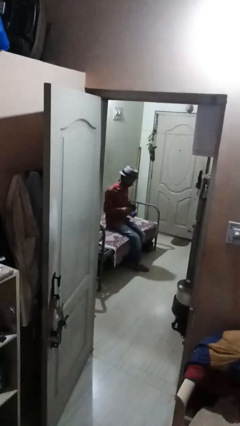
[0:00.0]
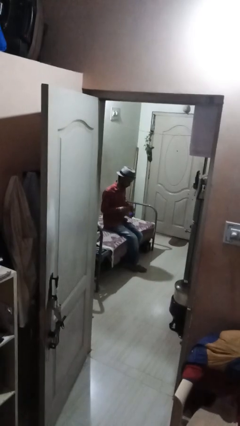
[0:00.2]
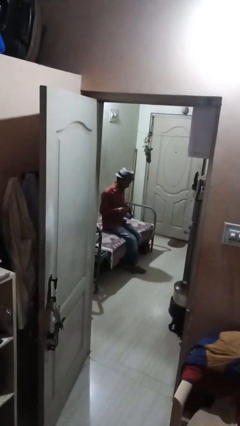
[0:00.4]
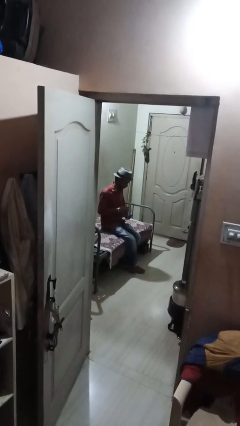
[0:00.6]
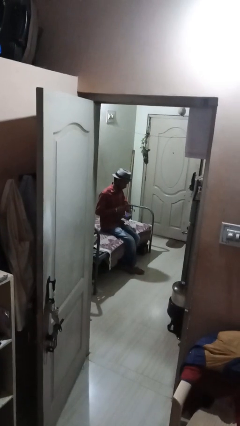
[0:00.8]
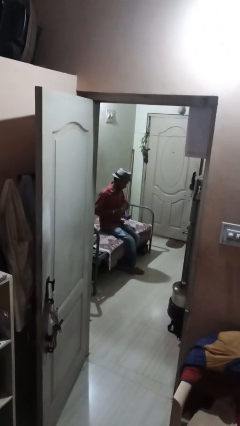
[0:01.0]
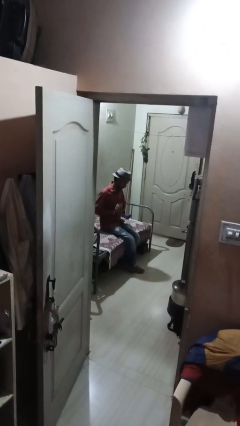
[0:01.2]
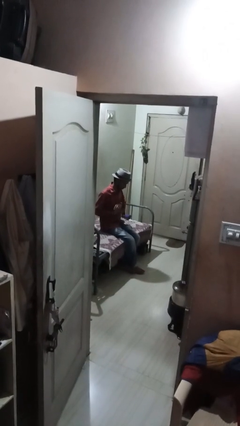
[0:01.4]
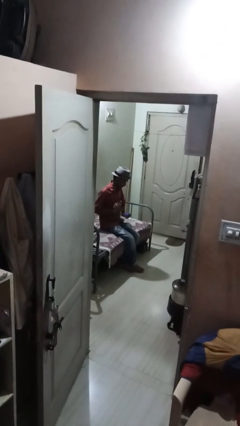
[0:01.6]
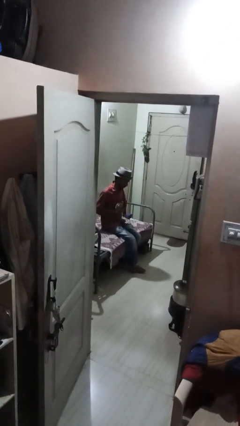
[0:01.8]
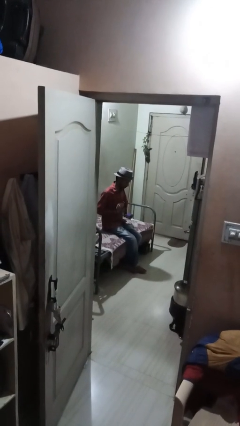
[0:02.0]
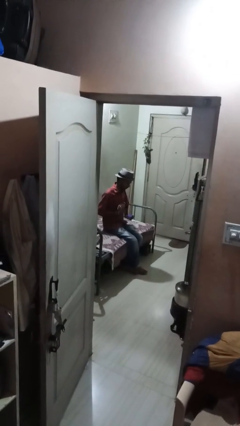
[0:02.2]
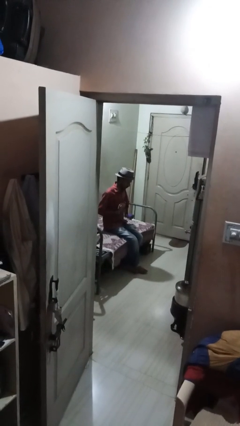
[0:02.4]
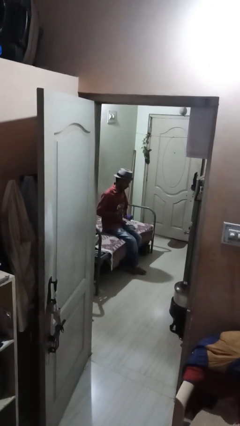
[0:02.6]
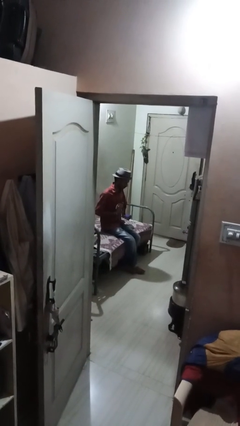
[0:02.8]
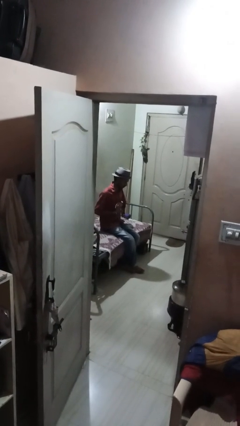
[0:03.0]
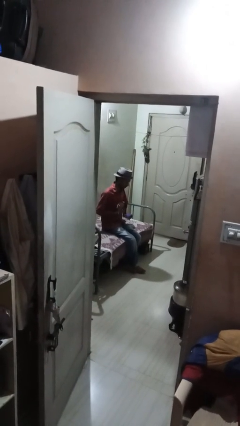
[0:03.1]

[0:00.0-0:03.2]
person puts on wristwatch

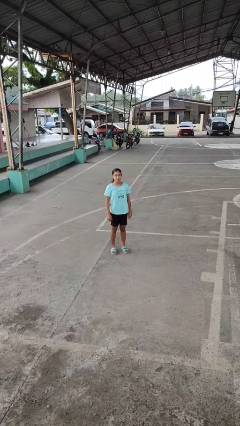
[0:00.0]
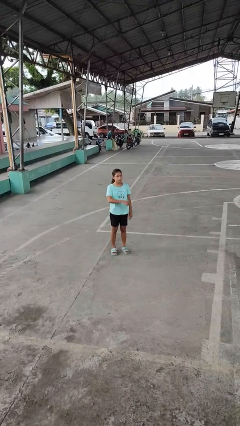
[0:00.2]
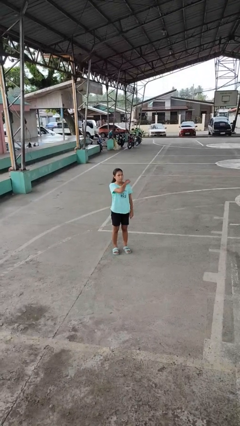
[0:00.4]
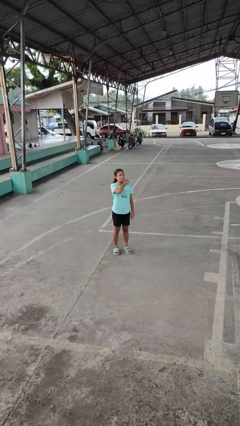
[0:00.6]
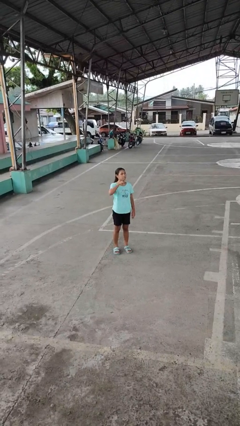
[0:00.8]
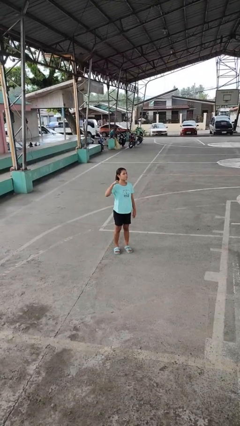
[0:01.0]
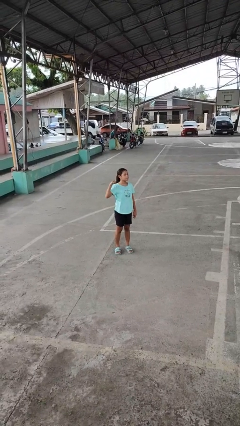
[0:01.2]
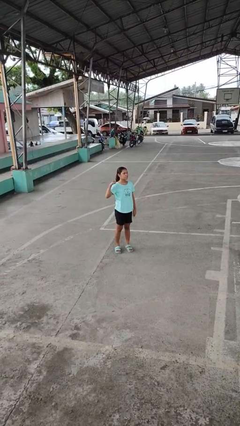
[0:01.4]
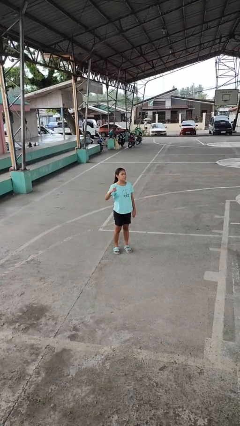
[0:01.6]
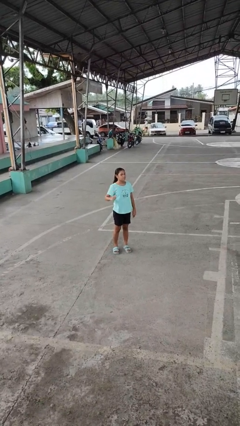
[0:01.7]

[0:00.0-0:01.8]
person gestures cut

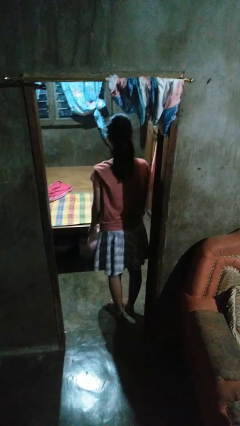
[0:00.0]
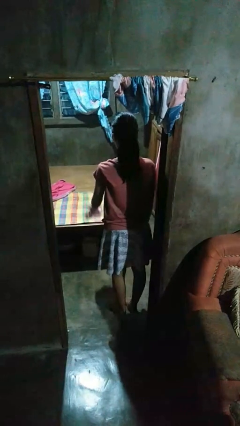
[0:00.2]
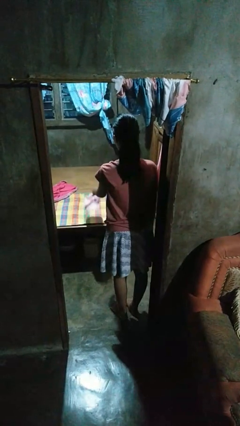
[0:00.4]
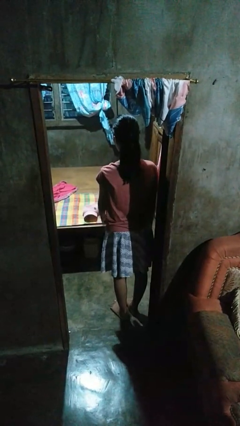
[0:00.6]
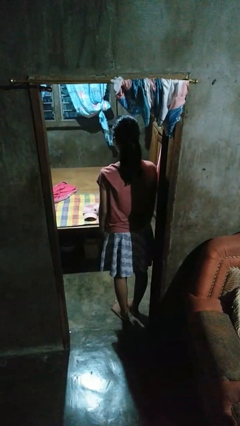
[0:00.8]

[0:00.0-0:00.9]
person throws object on bed

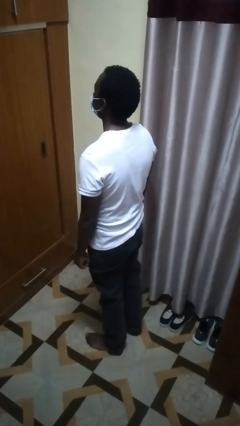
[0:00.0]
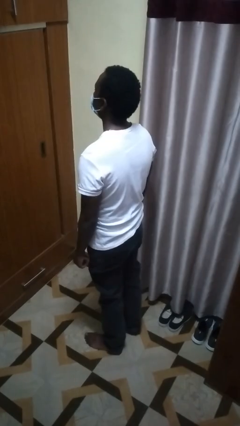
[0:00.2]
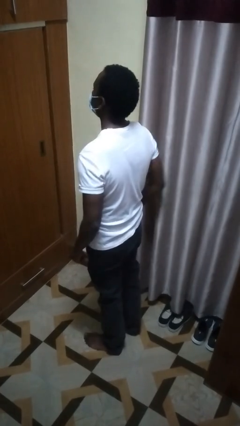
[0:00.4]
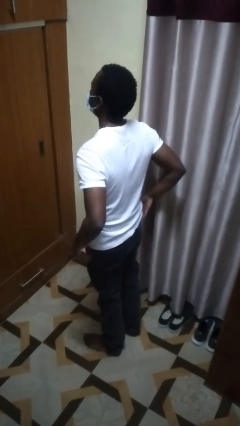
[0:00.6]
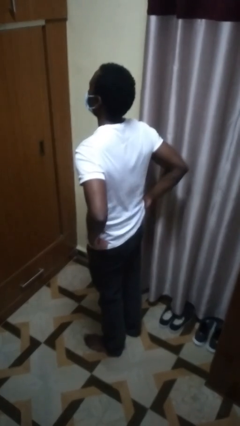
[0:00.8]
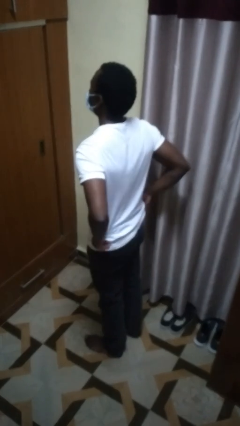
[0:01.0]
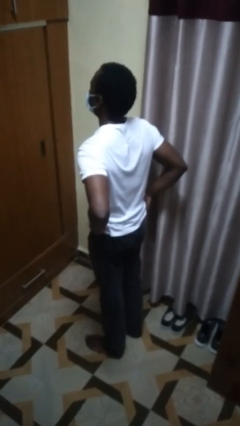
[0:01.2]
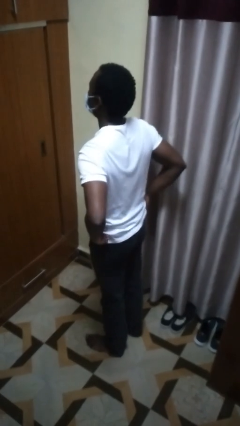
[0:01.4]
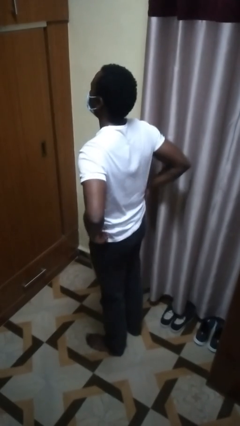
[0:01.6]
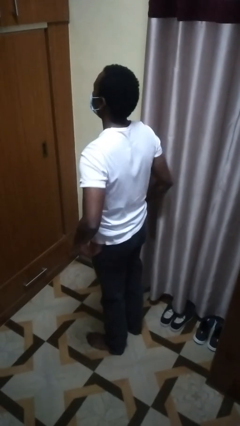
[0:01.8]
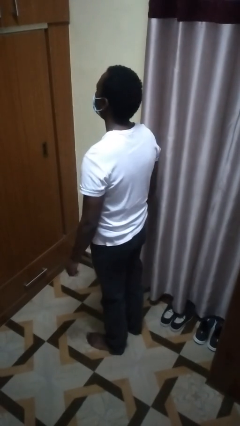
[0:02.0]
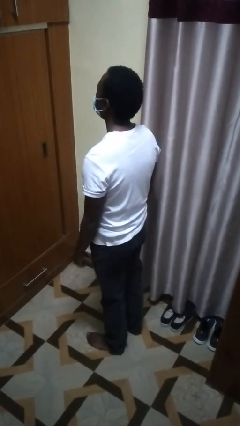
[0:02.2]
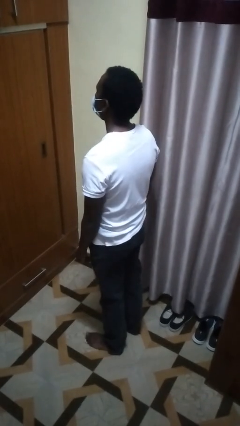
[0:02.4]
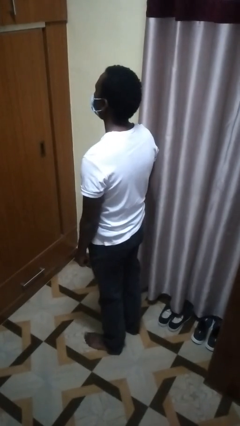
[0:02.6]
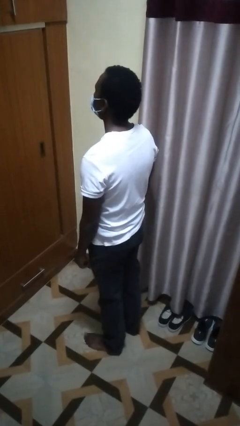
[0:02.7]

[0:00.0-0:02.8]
person hikes up pants

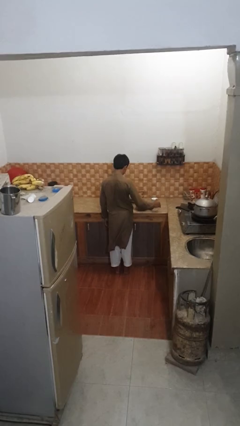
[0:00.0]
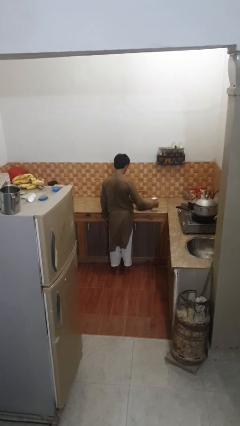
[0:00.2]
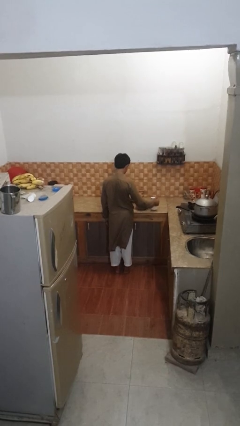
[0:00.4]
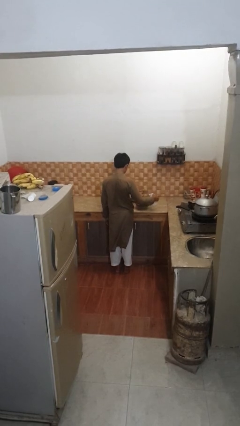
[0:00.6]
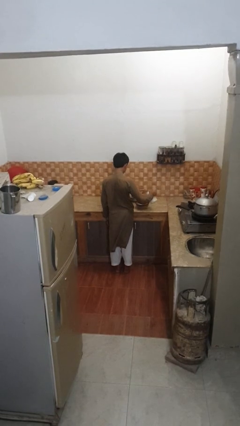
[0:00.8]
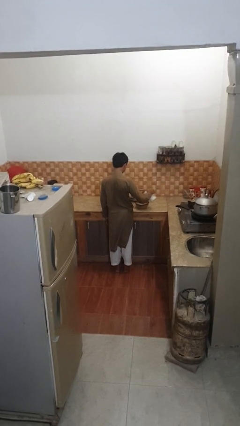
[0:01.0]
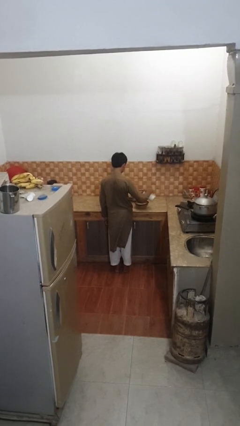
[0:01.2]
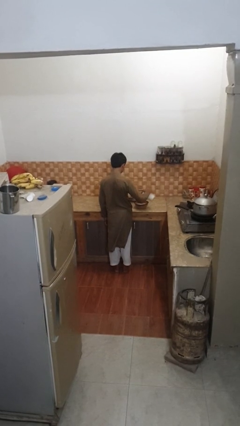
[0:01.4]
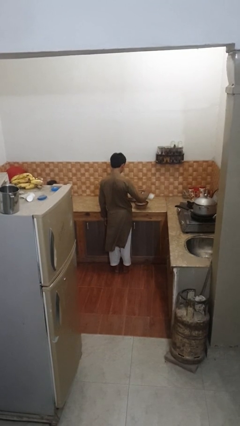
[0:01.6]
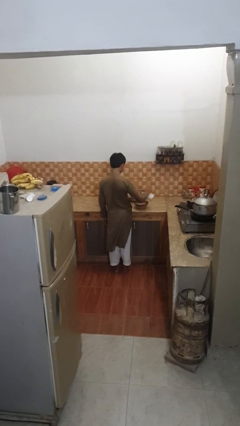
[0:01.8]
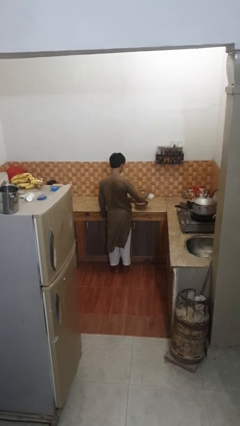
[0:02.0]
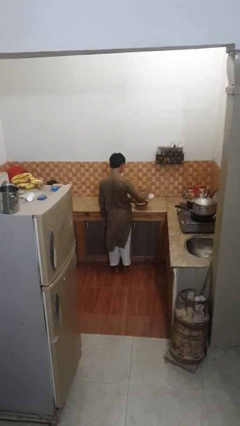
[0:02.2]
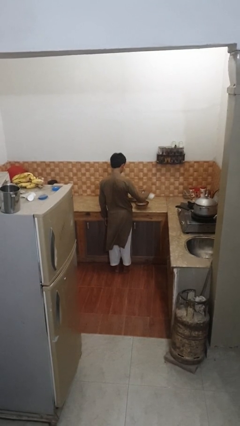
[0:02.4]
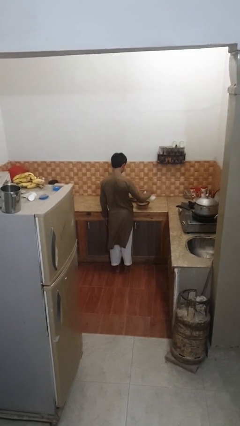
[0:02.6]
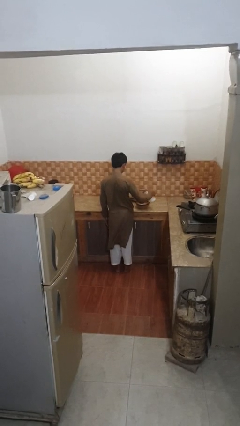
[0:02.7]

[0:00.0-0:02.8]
person pours into bowl

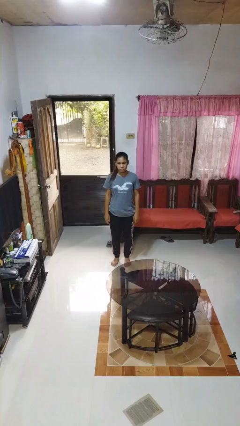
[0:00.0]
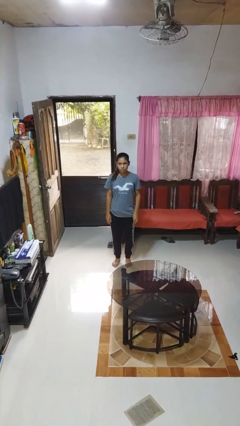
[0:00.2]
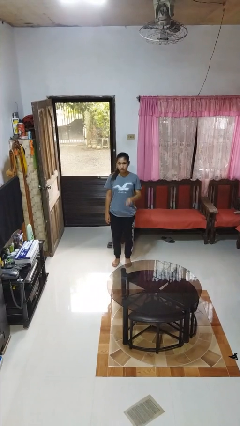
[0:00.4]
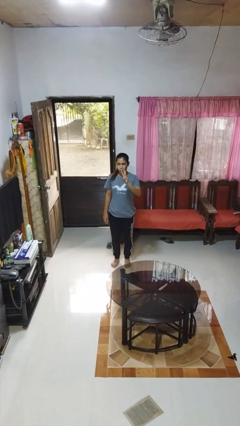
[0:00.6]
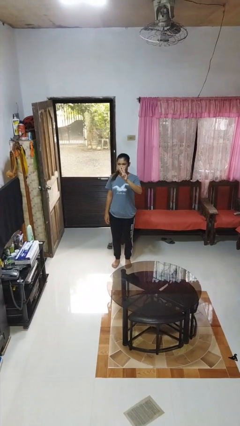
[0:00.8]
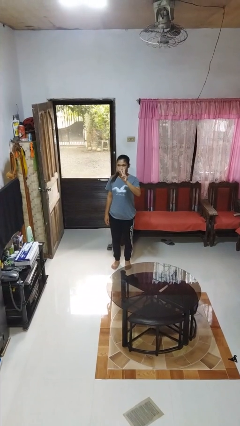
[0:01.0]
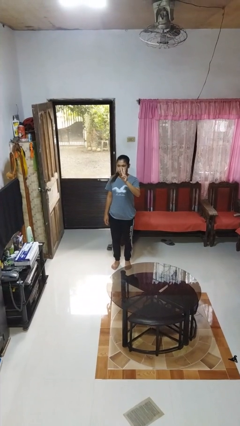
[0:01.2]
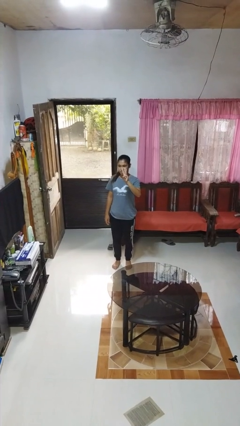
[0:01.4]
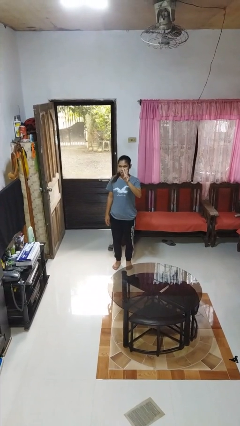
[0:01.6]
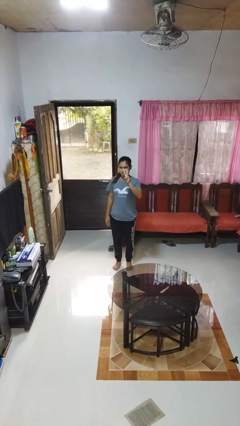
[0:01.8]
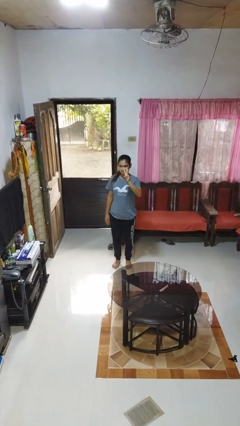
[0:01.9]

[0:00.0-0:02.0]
person gestures number three

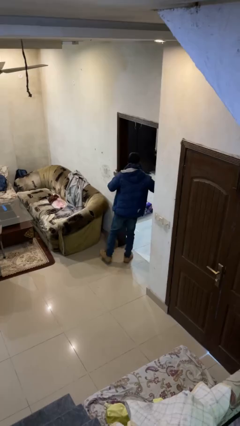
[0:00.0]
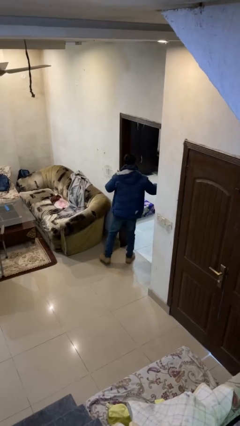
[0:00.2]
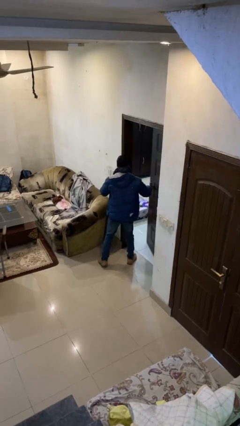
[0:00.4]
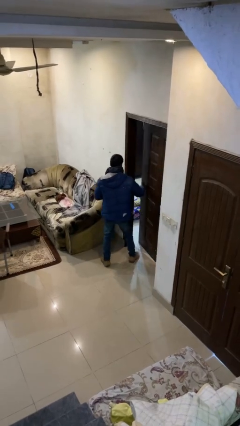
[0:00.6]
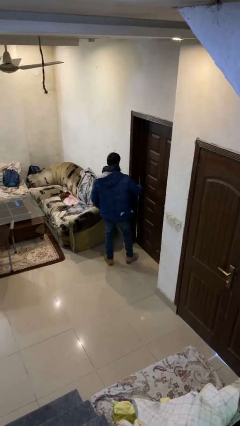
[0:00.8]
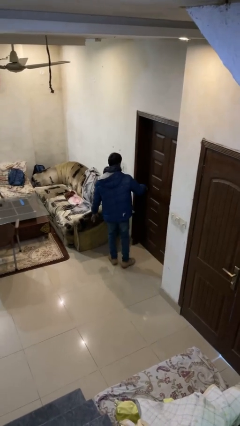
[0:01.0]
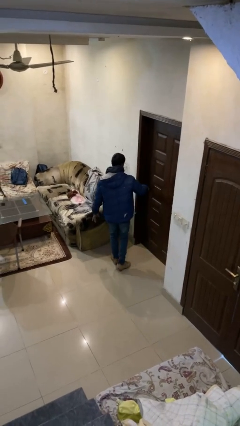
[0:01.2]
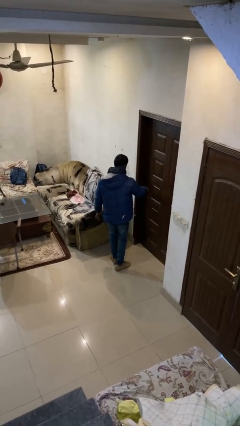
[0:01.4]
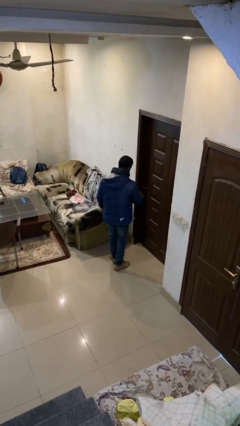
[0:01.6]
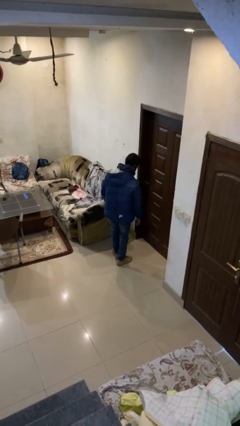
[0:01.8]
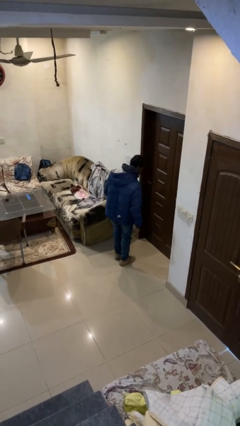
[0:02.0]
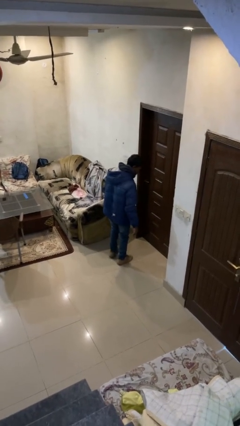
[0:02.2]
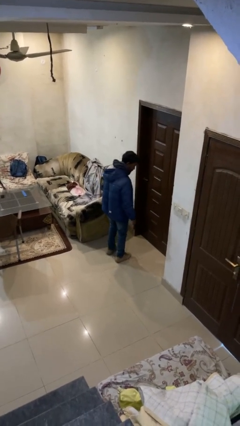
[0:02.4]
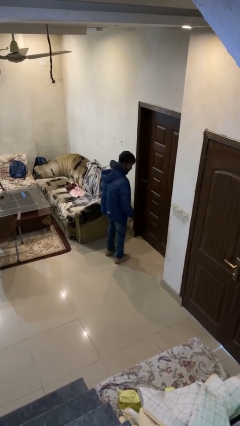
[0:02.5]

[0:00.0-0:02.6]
person closes facility door

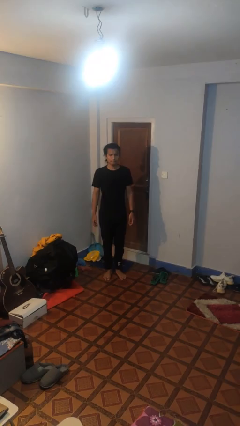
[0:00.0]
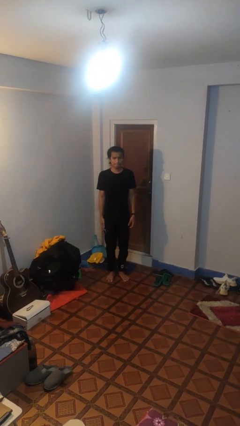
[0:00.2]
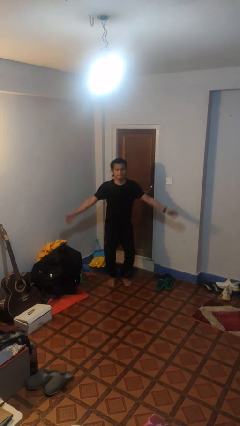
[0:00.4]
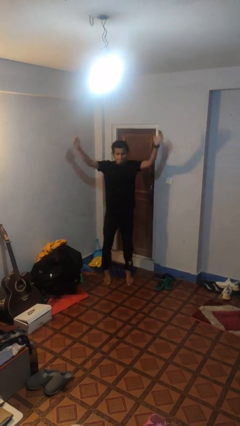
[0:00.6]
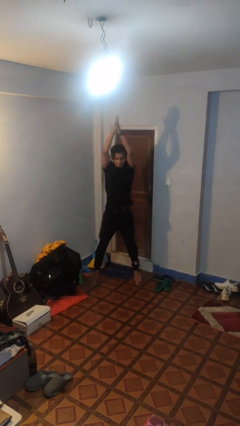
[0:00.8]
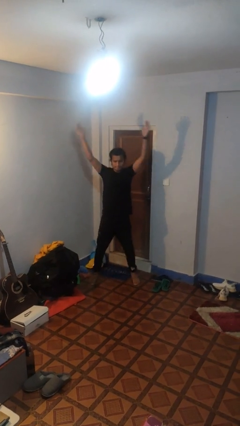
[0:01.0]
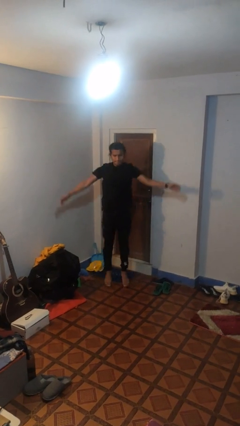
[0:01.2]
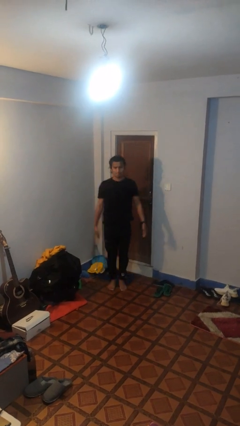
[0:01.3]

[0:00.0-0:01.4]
person exercises with jumping jacks
